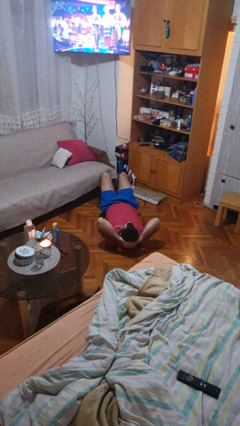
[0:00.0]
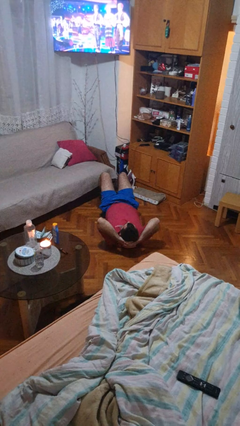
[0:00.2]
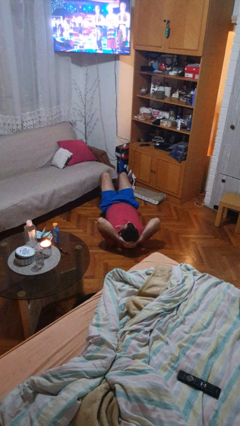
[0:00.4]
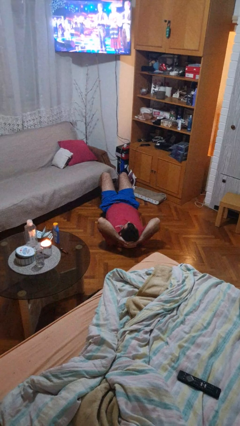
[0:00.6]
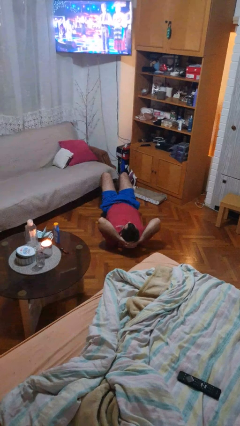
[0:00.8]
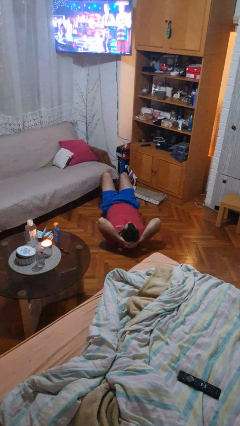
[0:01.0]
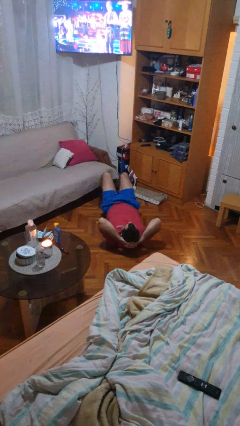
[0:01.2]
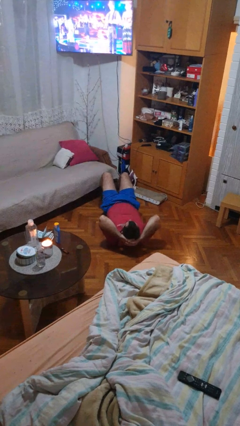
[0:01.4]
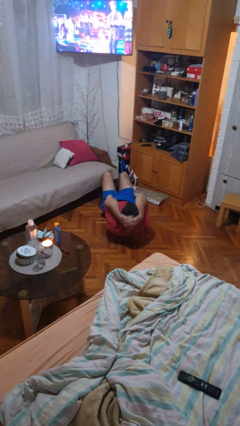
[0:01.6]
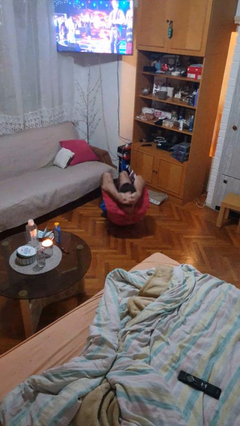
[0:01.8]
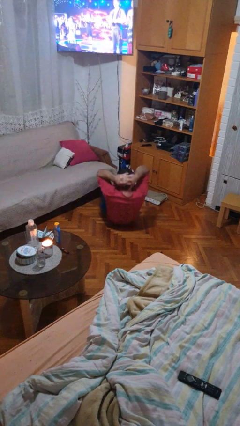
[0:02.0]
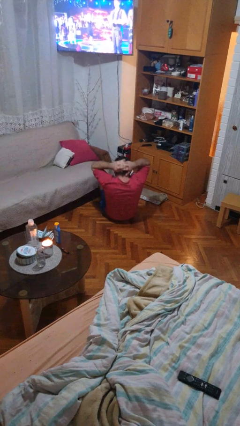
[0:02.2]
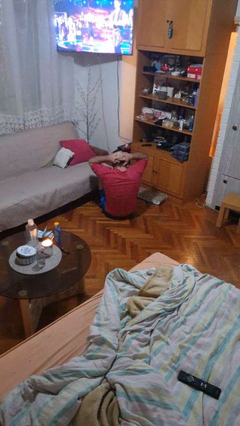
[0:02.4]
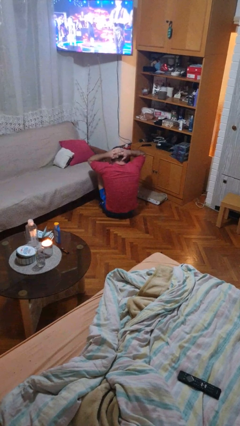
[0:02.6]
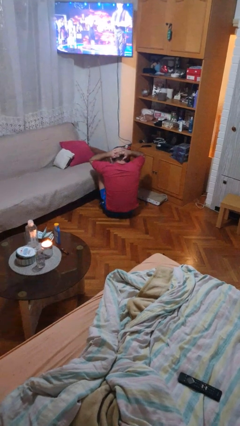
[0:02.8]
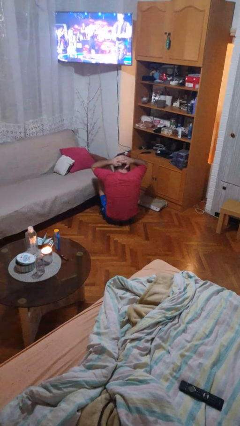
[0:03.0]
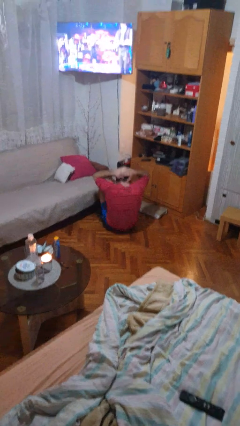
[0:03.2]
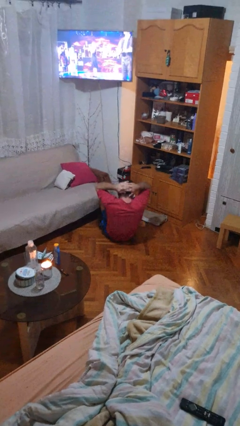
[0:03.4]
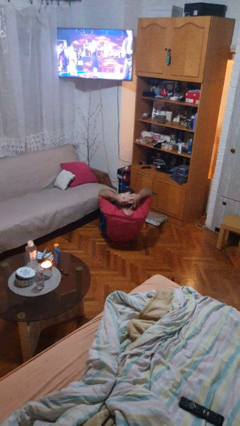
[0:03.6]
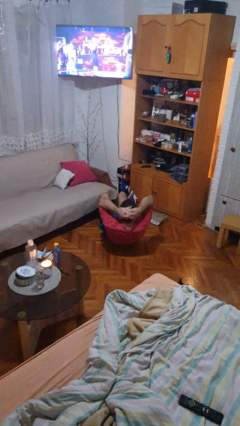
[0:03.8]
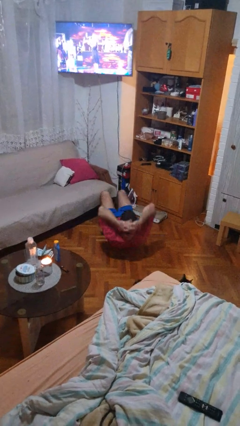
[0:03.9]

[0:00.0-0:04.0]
person exercises with situp

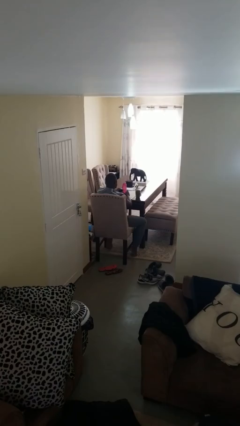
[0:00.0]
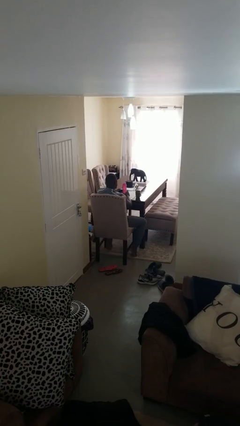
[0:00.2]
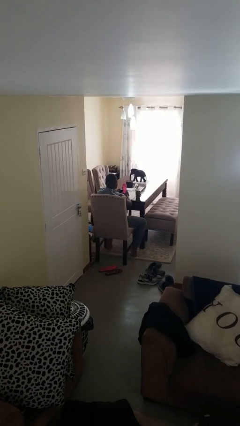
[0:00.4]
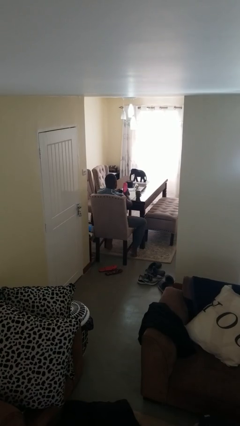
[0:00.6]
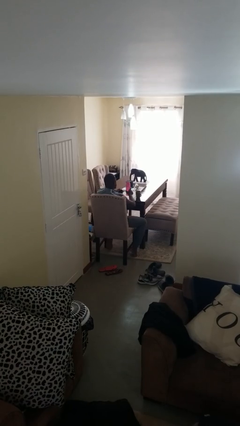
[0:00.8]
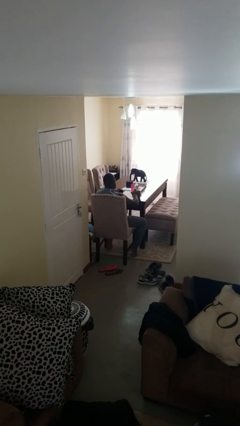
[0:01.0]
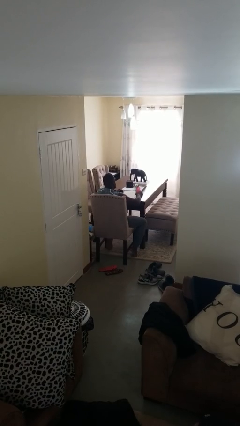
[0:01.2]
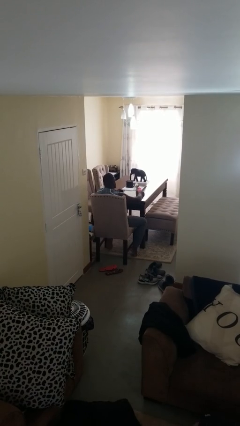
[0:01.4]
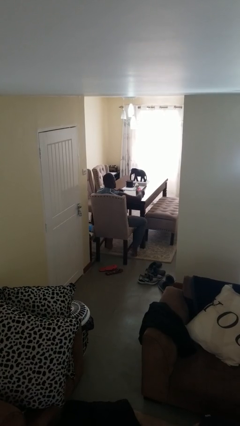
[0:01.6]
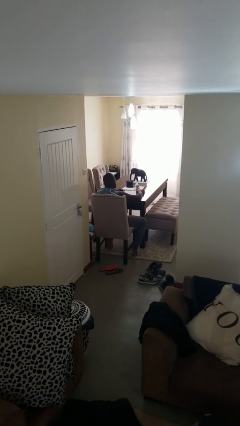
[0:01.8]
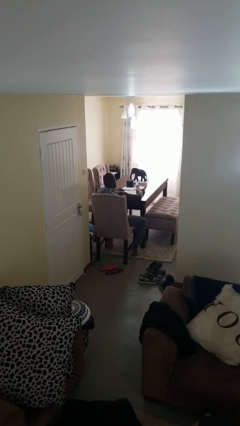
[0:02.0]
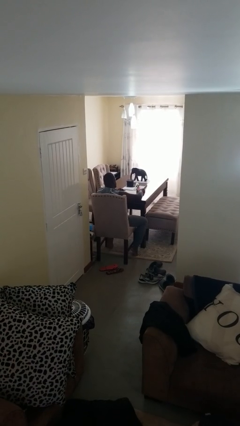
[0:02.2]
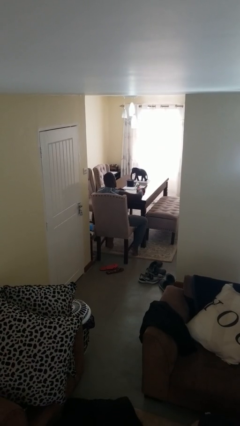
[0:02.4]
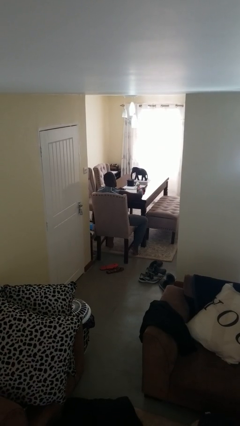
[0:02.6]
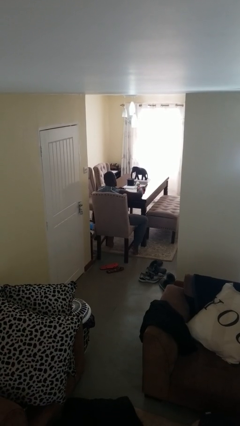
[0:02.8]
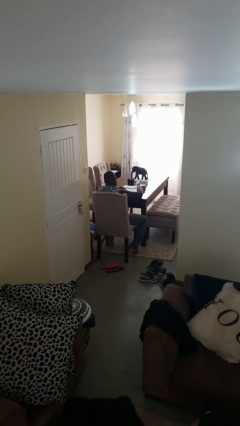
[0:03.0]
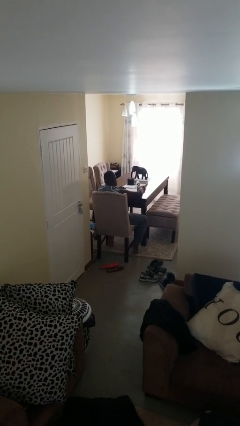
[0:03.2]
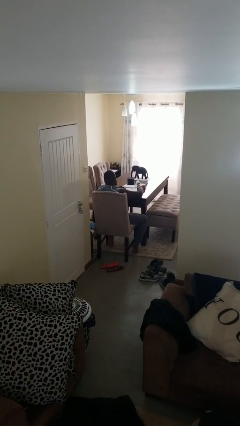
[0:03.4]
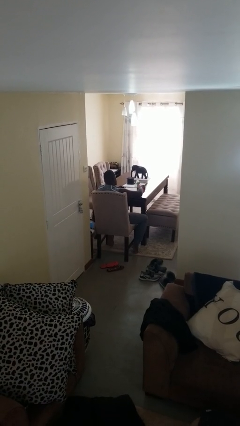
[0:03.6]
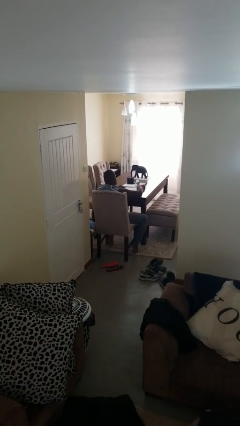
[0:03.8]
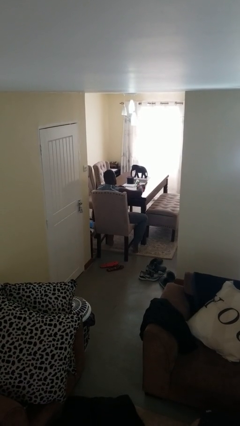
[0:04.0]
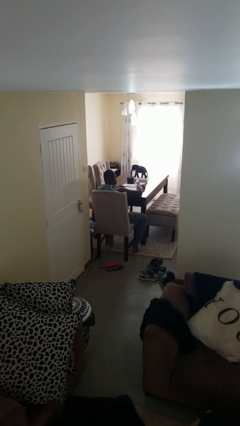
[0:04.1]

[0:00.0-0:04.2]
person pours liquid into cup

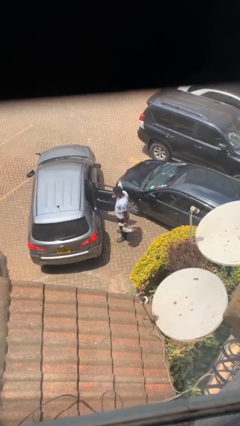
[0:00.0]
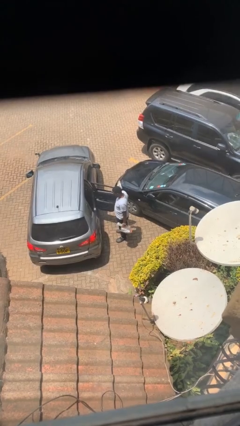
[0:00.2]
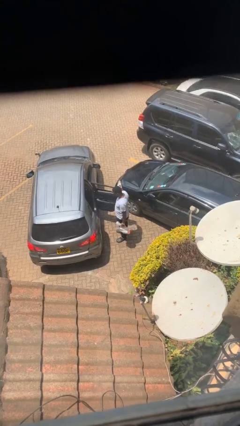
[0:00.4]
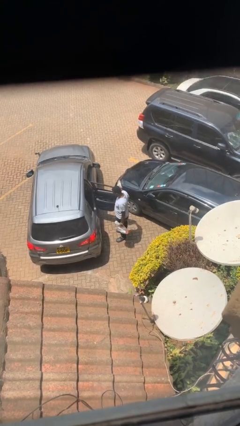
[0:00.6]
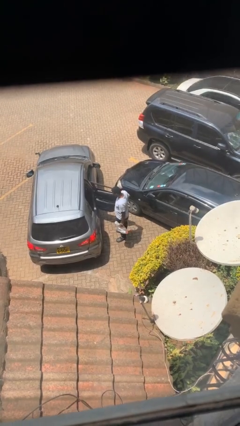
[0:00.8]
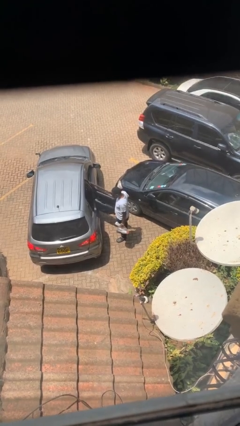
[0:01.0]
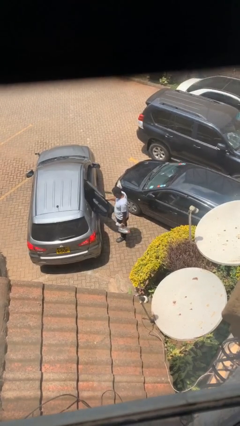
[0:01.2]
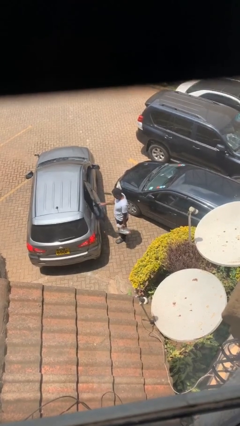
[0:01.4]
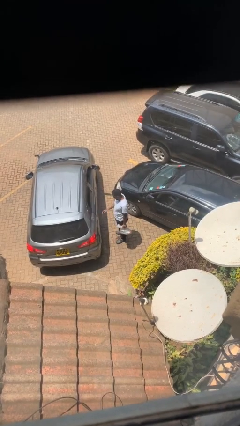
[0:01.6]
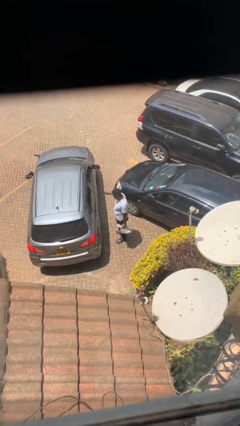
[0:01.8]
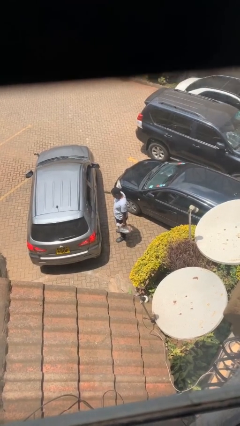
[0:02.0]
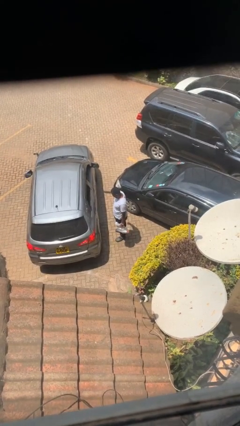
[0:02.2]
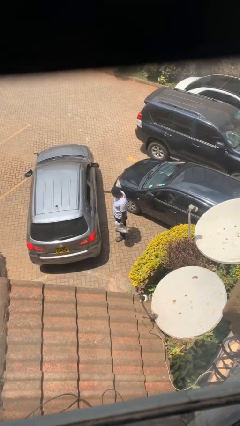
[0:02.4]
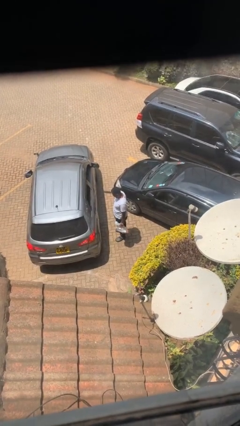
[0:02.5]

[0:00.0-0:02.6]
person closes car door

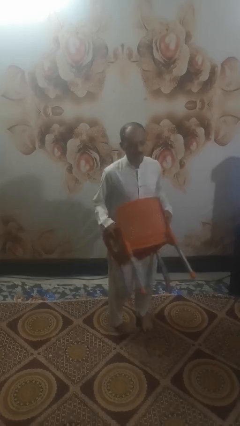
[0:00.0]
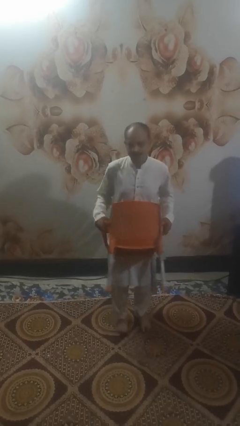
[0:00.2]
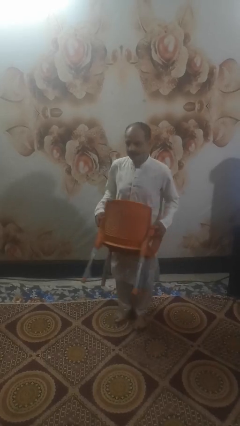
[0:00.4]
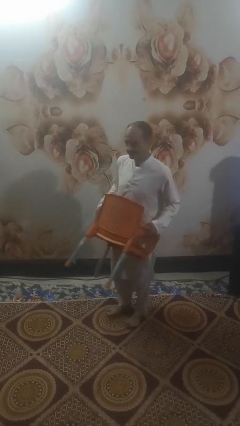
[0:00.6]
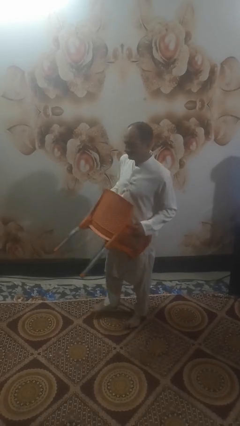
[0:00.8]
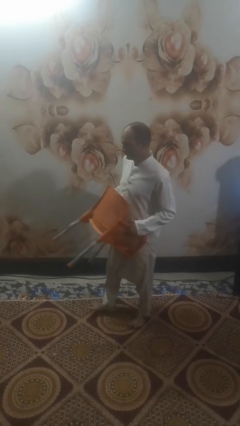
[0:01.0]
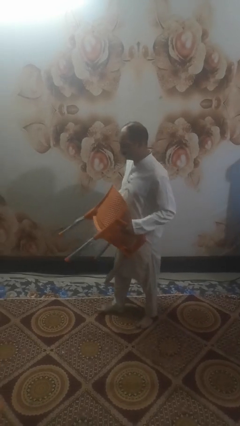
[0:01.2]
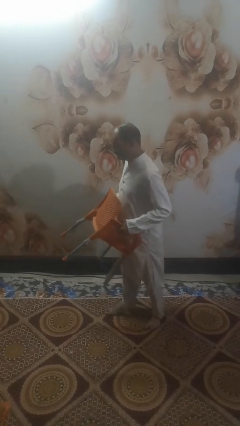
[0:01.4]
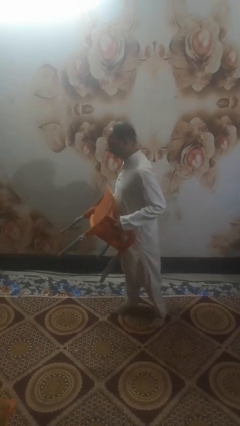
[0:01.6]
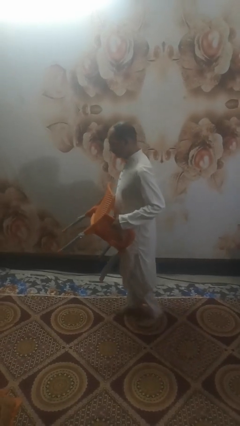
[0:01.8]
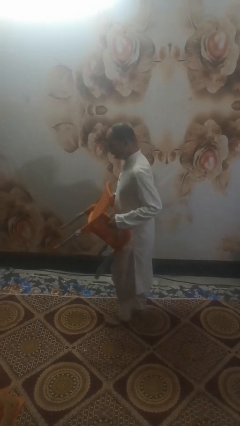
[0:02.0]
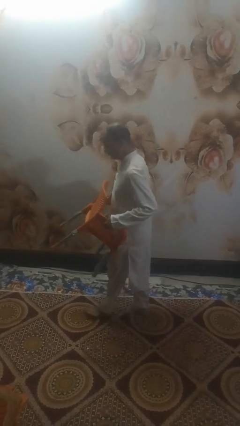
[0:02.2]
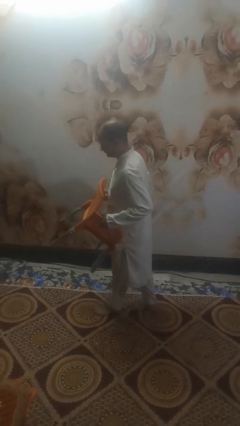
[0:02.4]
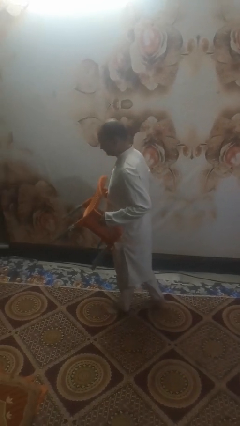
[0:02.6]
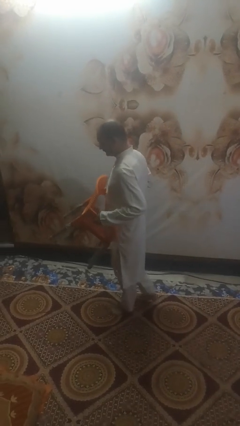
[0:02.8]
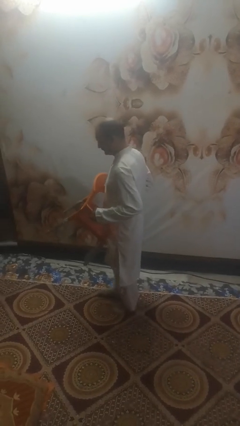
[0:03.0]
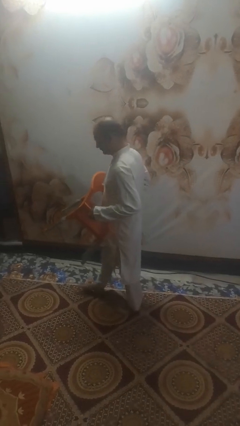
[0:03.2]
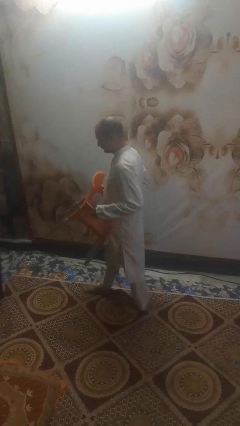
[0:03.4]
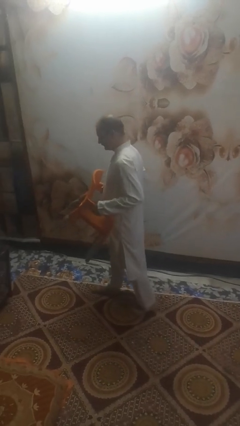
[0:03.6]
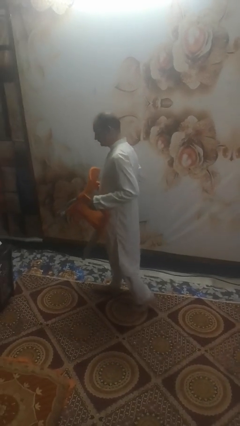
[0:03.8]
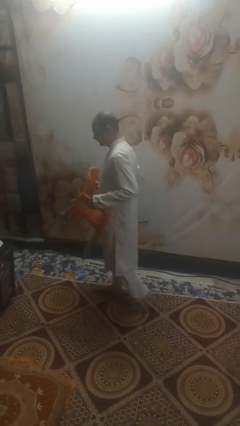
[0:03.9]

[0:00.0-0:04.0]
person carries furniture

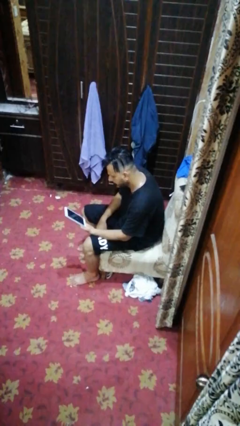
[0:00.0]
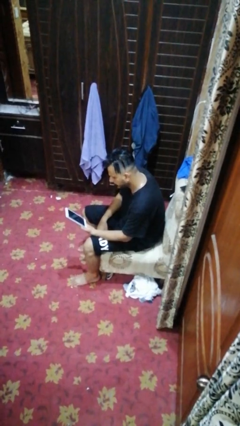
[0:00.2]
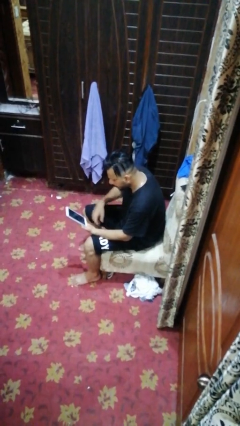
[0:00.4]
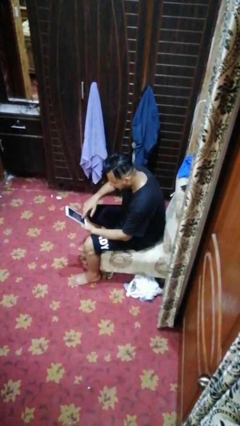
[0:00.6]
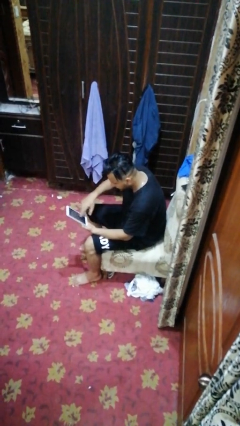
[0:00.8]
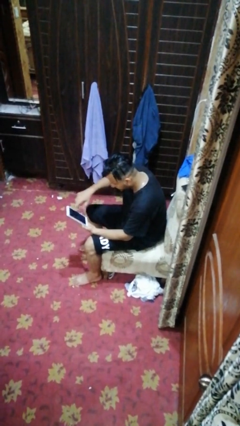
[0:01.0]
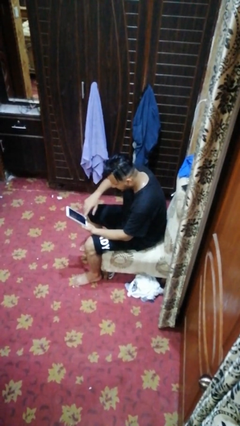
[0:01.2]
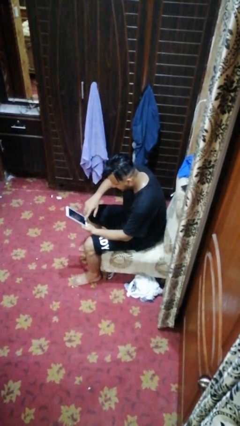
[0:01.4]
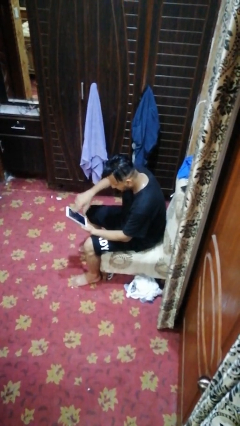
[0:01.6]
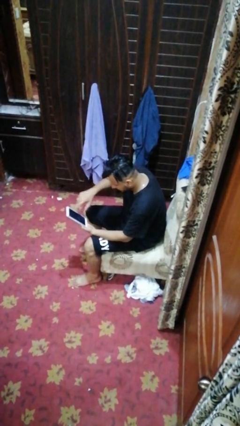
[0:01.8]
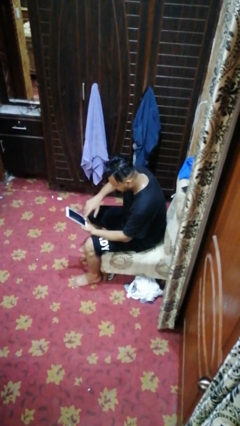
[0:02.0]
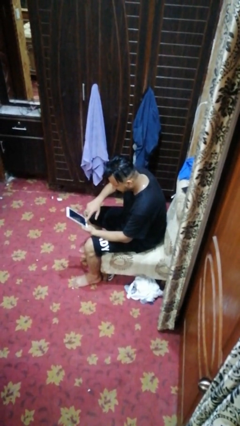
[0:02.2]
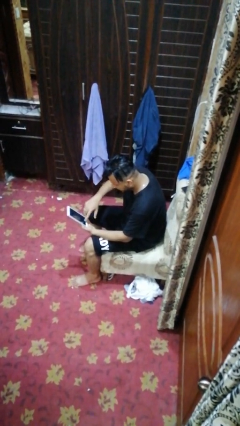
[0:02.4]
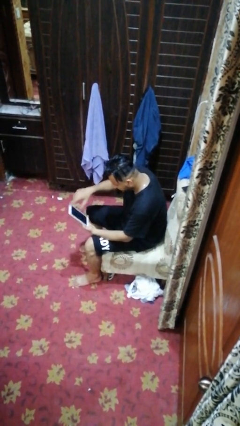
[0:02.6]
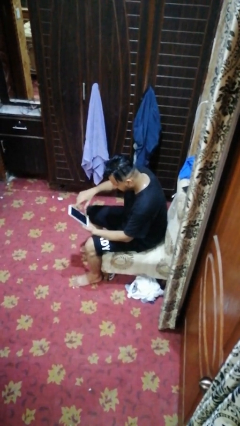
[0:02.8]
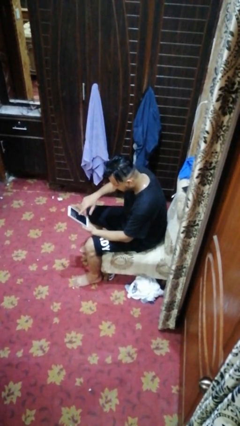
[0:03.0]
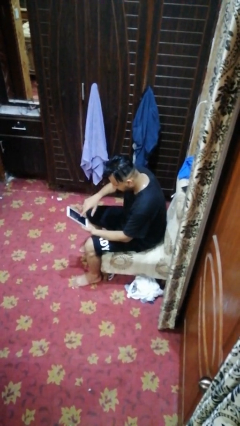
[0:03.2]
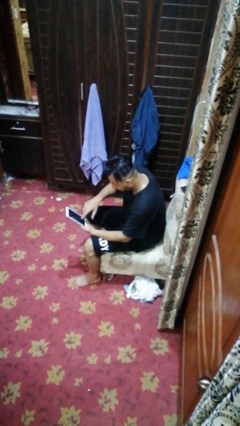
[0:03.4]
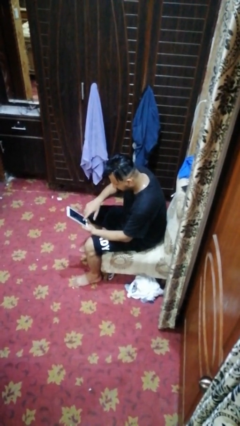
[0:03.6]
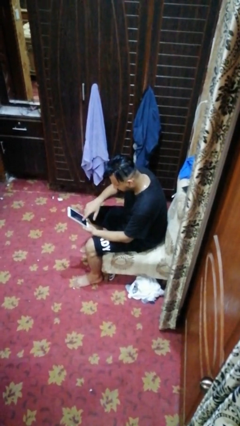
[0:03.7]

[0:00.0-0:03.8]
person interacts with tablet
